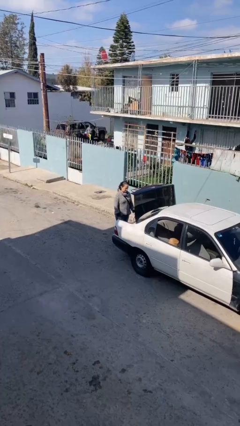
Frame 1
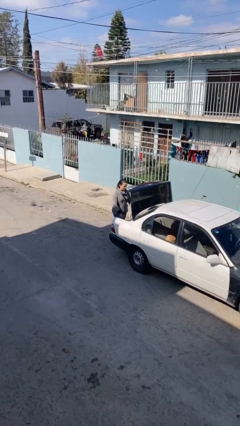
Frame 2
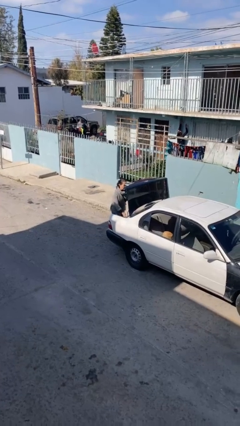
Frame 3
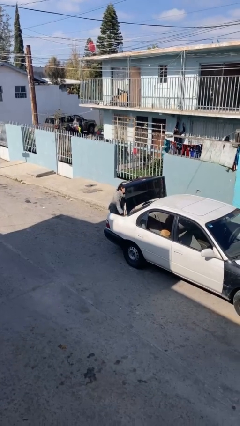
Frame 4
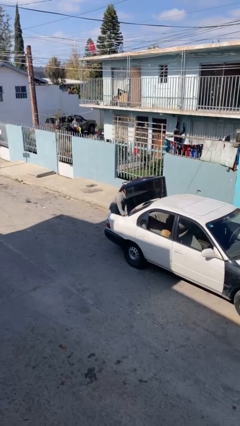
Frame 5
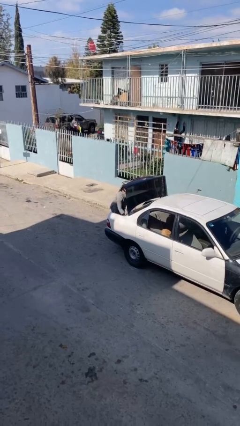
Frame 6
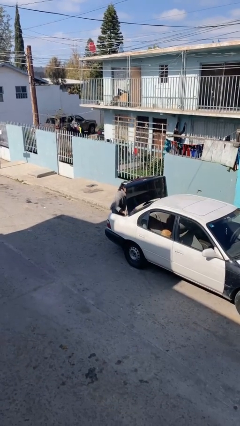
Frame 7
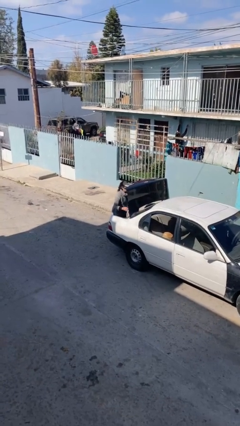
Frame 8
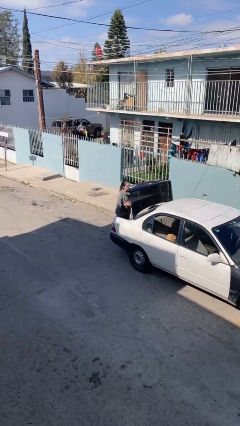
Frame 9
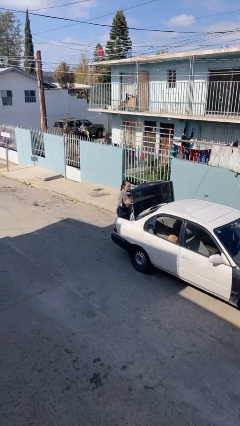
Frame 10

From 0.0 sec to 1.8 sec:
person unloads car

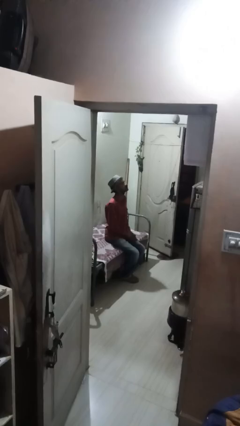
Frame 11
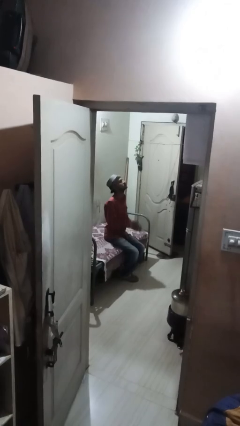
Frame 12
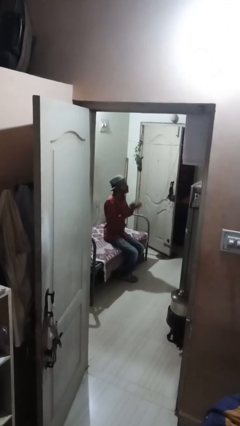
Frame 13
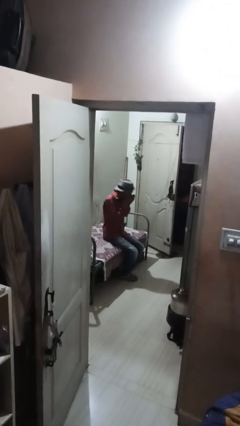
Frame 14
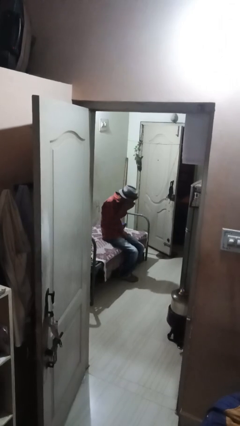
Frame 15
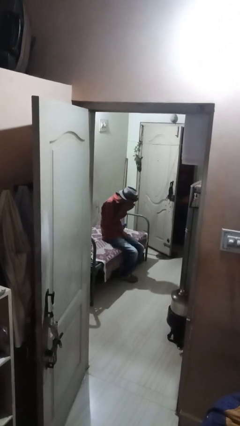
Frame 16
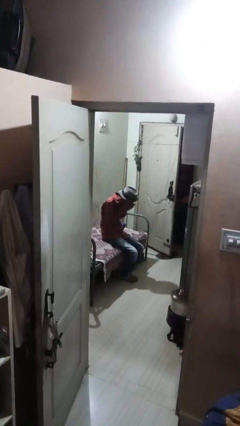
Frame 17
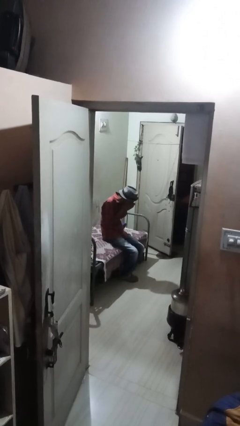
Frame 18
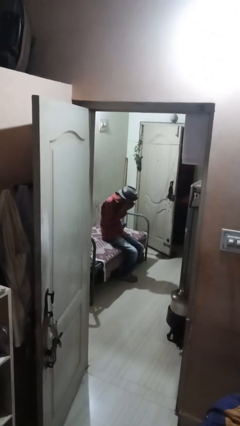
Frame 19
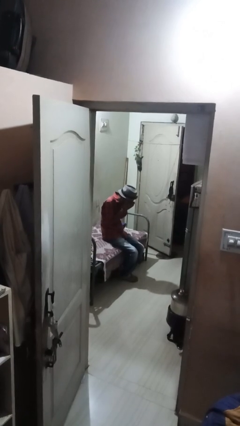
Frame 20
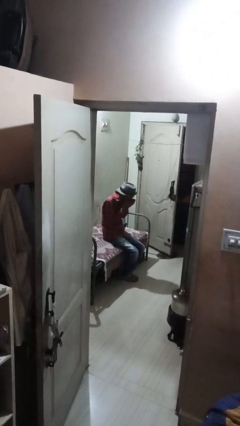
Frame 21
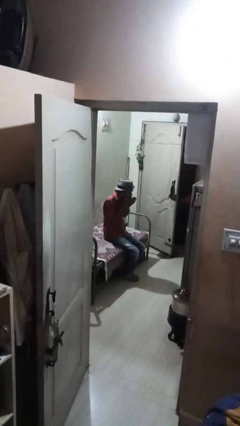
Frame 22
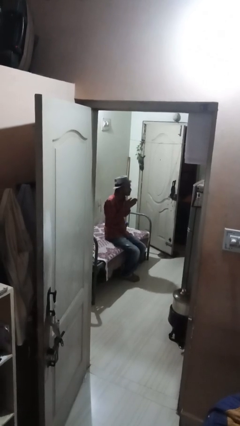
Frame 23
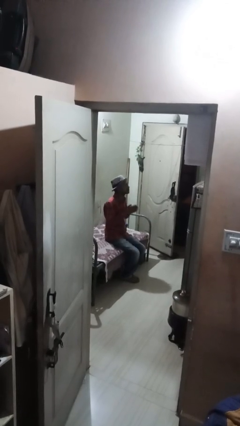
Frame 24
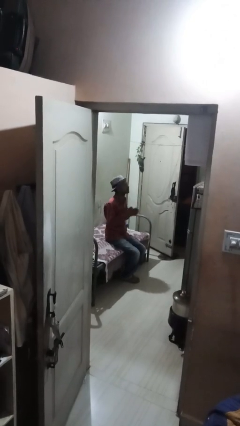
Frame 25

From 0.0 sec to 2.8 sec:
person sneezes into hand

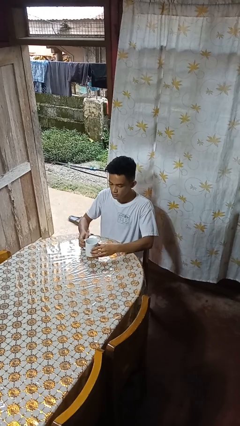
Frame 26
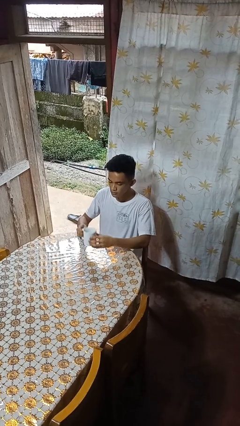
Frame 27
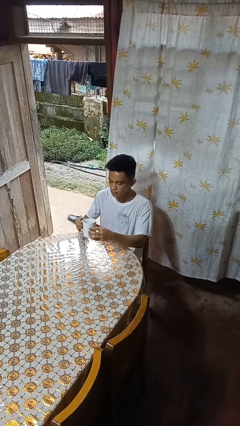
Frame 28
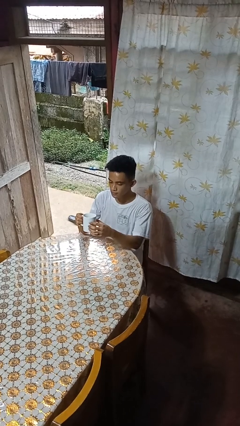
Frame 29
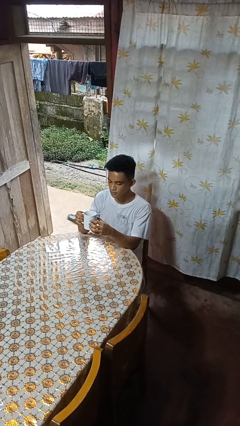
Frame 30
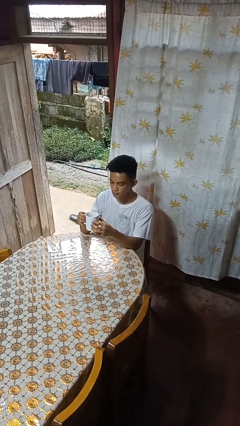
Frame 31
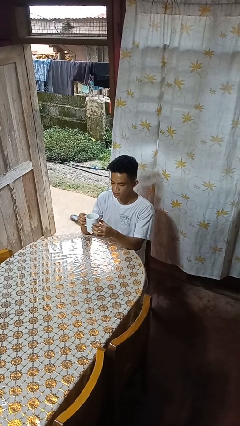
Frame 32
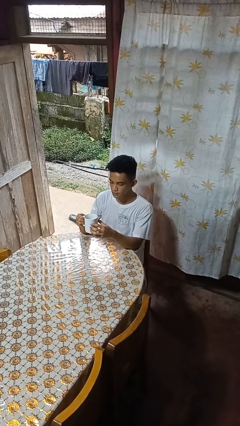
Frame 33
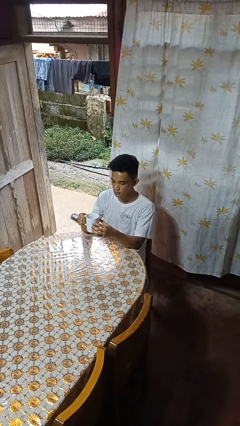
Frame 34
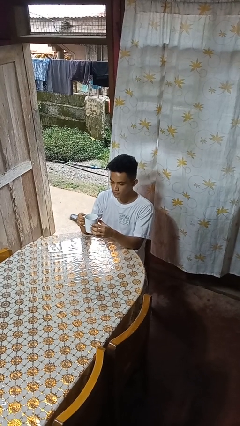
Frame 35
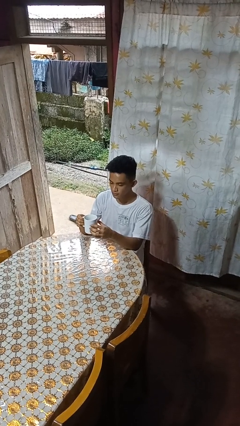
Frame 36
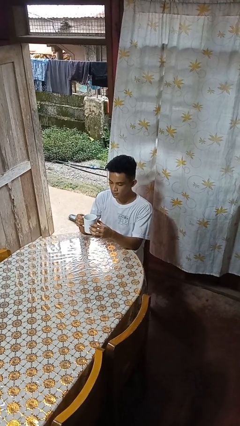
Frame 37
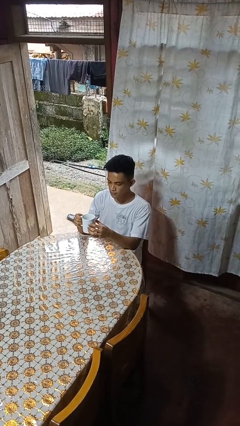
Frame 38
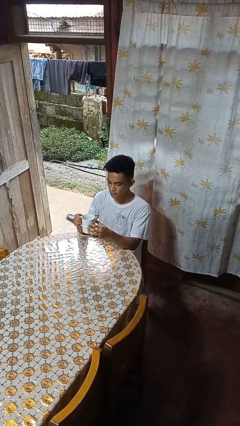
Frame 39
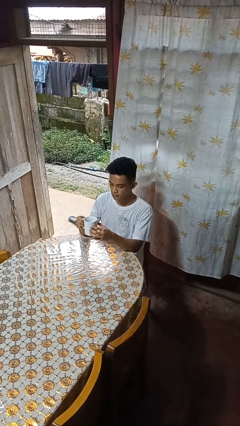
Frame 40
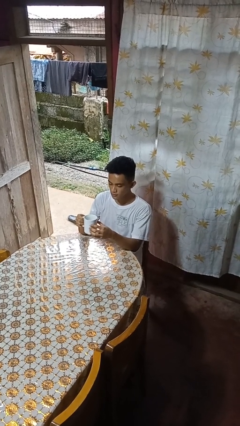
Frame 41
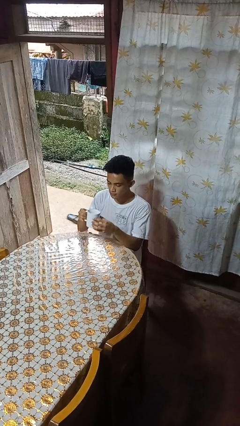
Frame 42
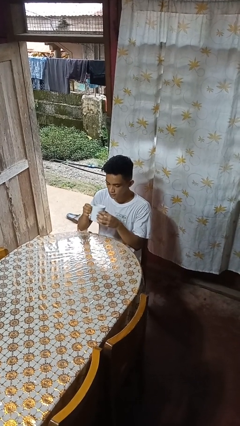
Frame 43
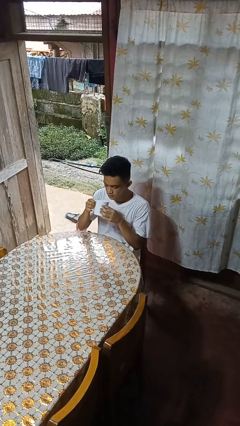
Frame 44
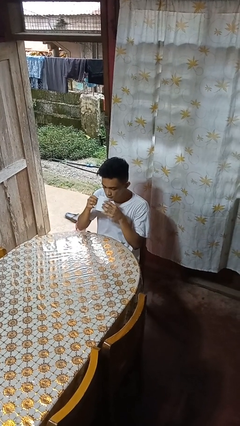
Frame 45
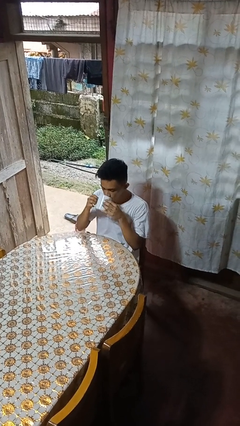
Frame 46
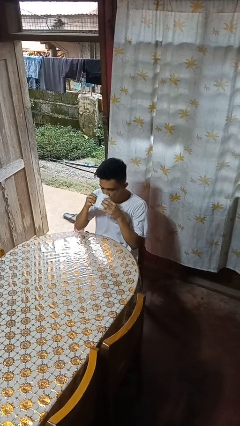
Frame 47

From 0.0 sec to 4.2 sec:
person picks up object from table

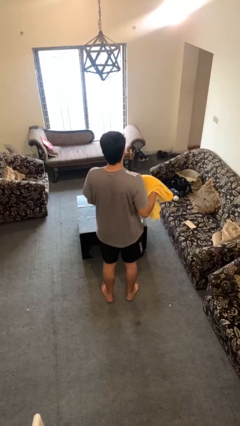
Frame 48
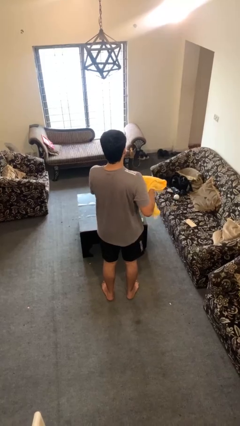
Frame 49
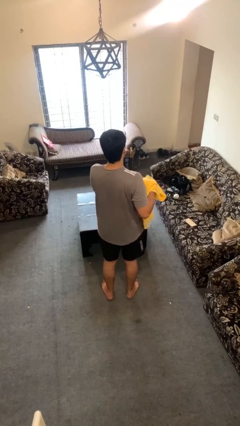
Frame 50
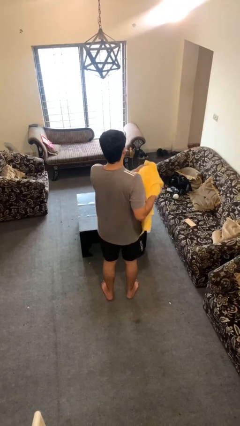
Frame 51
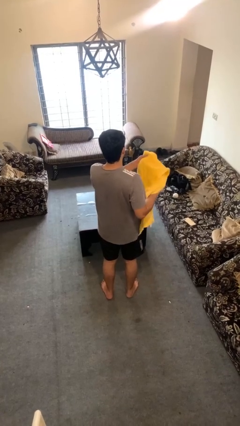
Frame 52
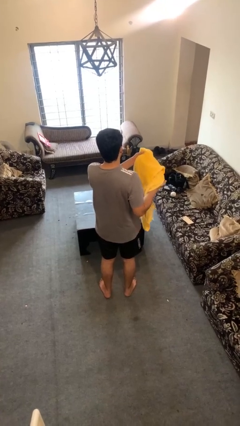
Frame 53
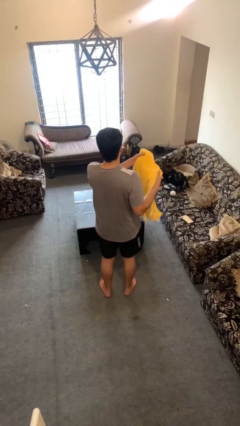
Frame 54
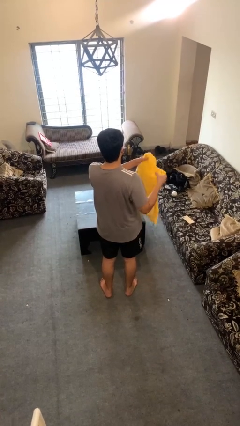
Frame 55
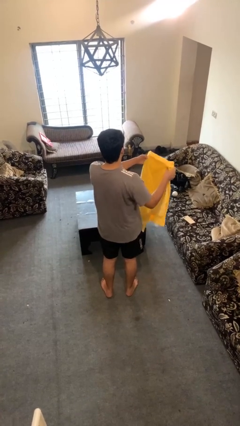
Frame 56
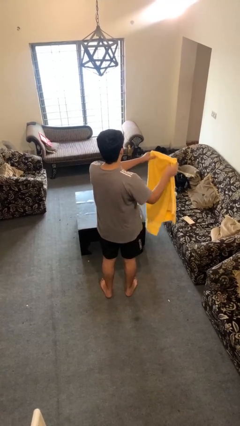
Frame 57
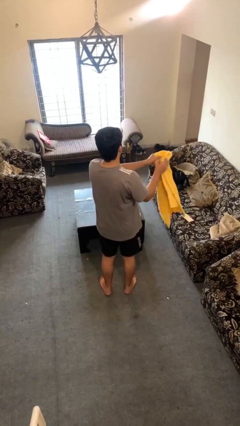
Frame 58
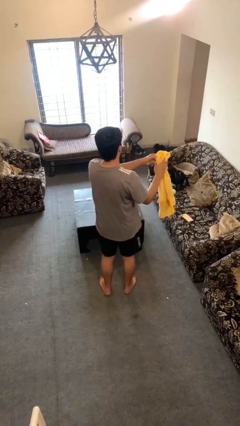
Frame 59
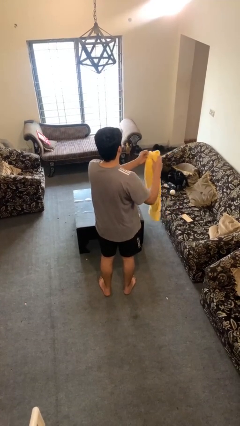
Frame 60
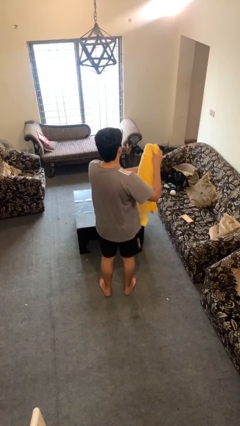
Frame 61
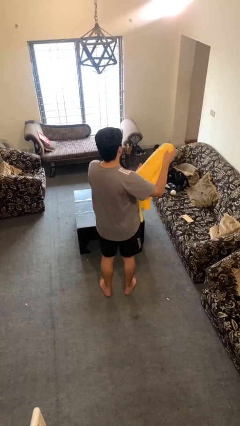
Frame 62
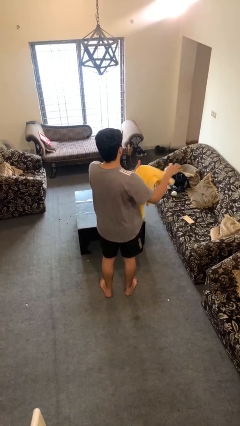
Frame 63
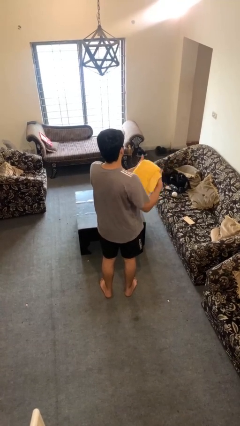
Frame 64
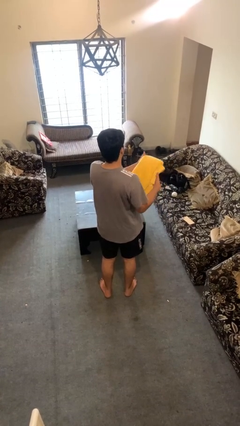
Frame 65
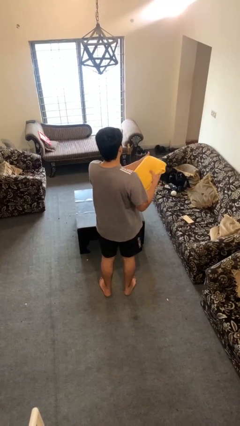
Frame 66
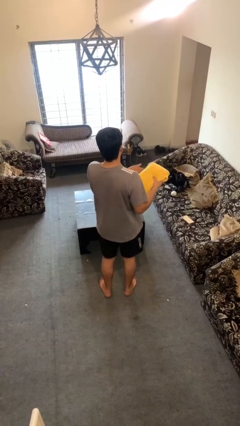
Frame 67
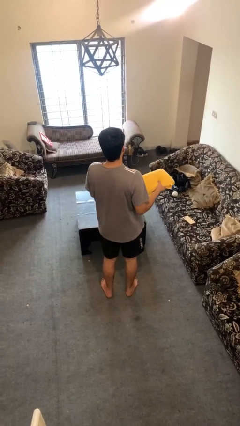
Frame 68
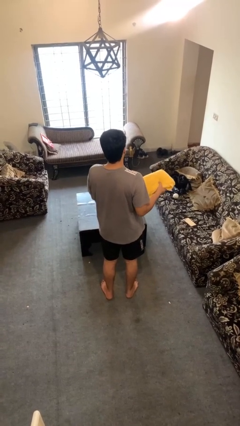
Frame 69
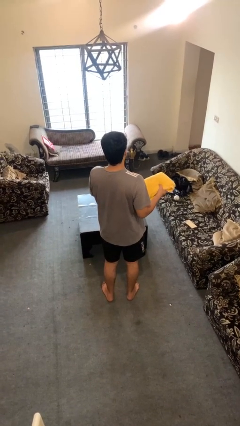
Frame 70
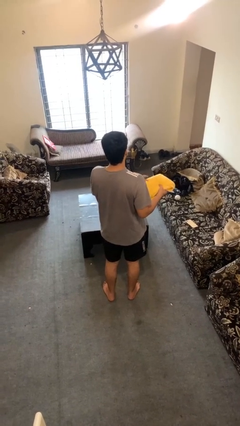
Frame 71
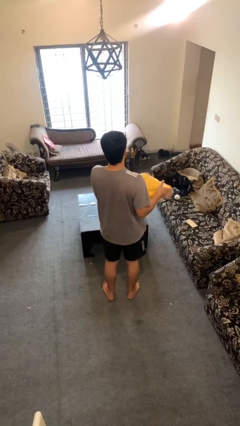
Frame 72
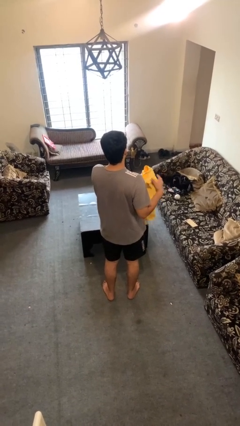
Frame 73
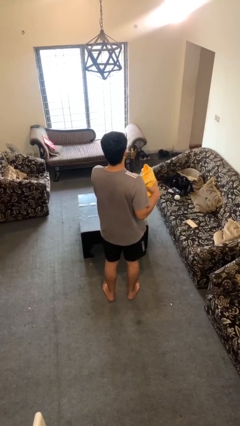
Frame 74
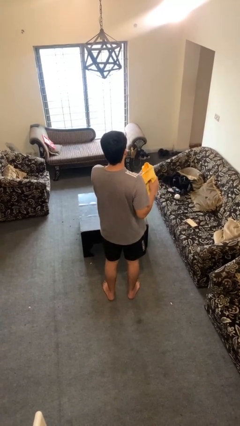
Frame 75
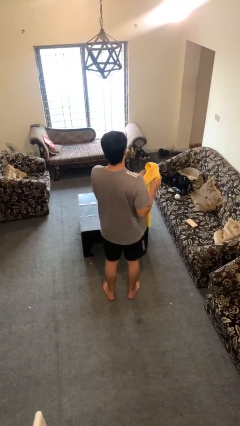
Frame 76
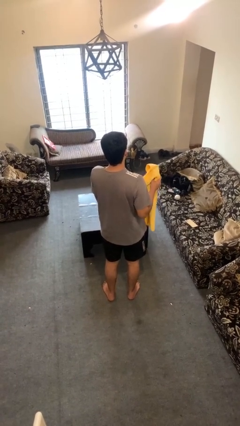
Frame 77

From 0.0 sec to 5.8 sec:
person folds towel

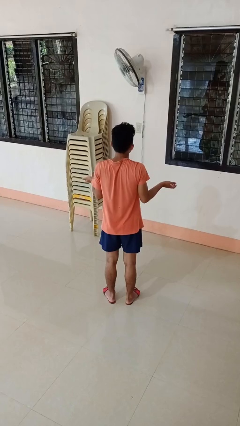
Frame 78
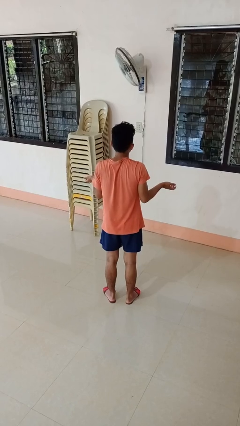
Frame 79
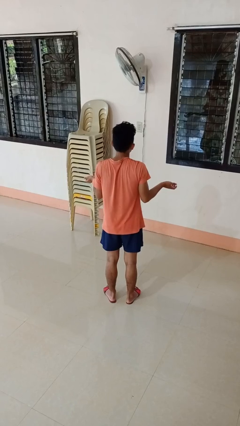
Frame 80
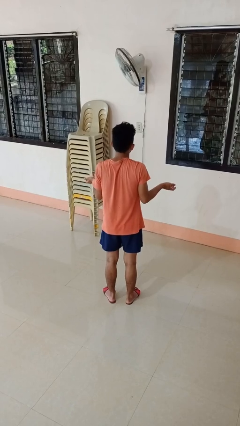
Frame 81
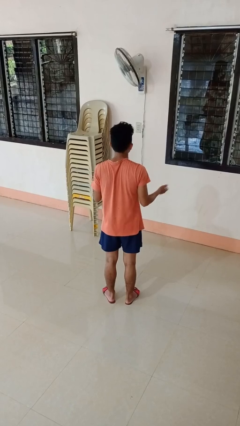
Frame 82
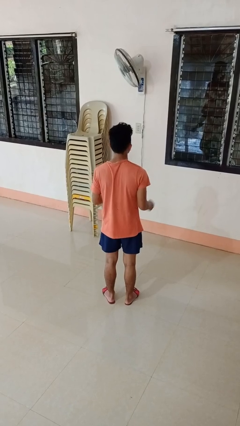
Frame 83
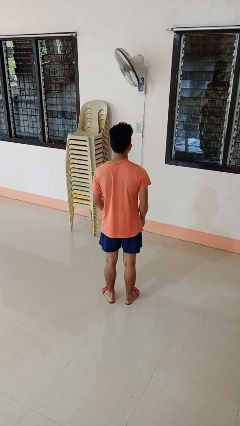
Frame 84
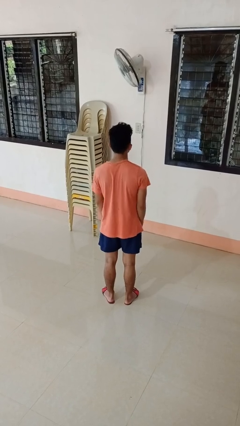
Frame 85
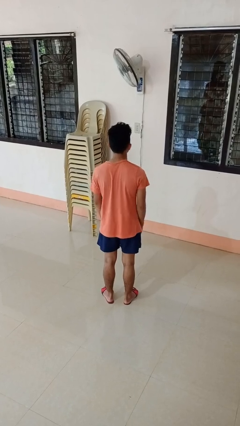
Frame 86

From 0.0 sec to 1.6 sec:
person shrugs

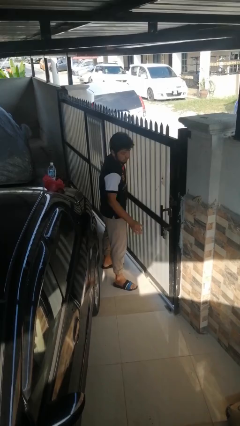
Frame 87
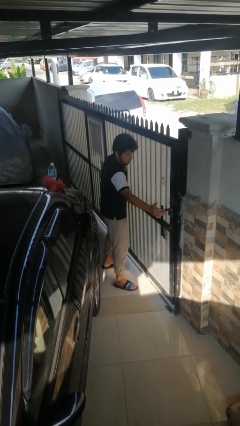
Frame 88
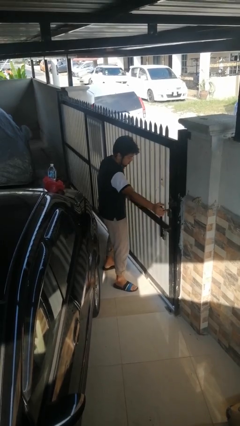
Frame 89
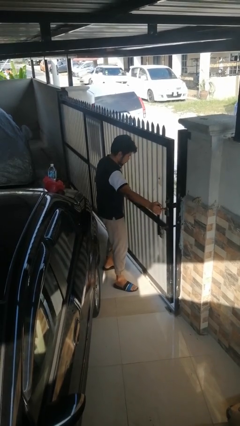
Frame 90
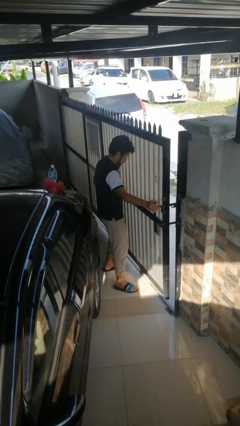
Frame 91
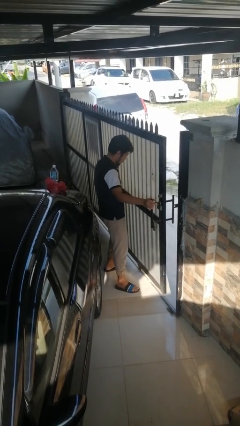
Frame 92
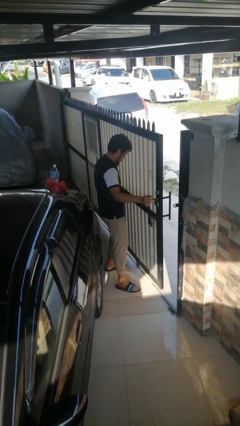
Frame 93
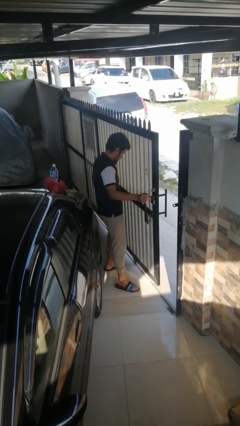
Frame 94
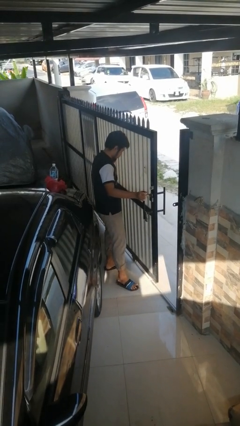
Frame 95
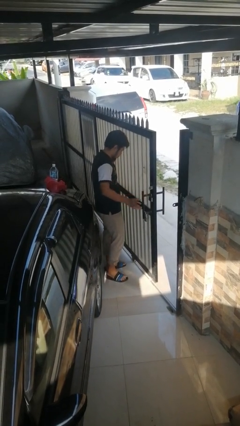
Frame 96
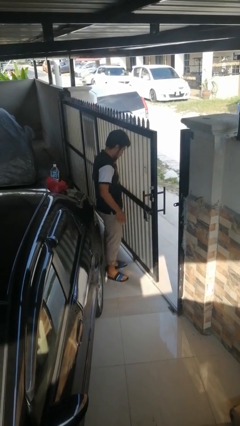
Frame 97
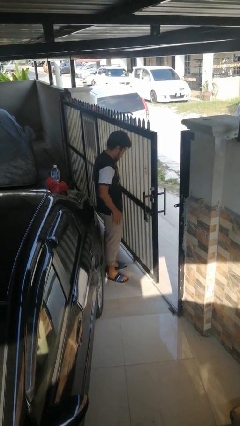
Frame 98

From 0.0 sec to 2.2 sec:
person opens sliding door
